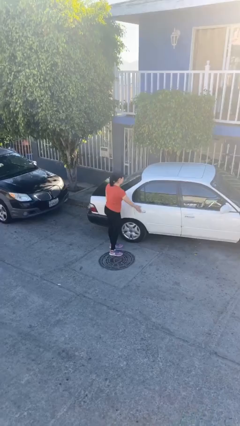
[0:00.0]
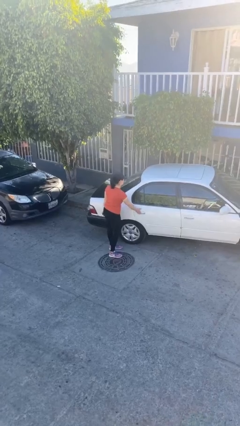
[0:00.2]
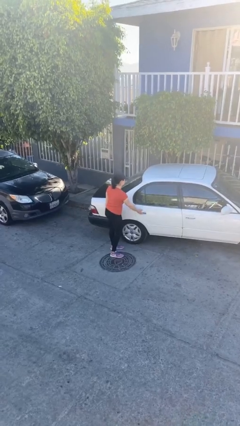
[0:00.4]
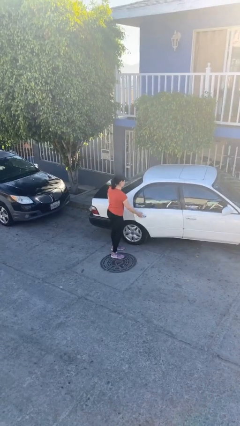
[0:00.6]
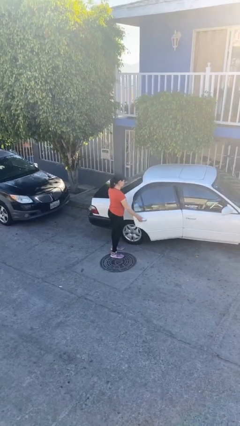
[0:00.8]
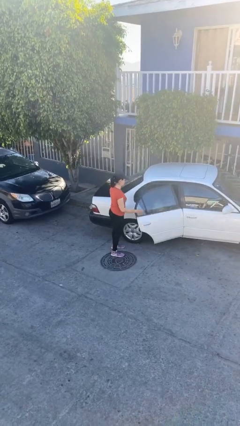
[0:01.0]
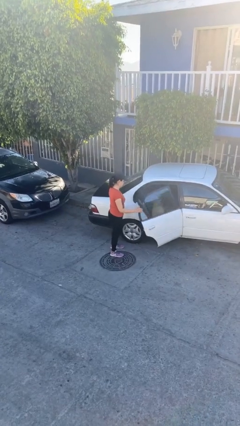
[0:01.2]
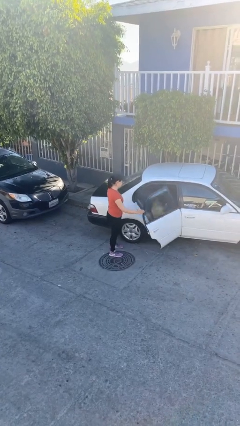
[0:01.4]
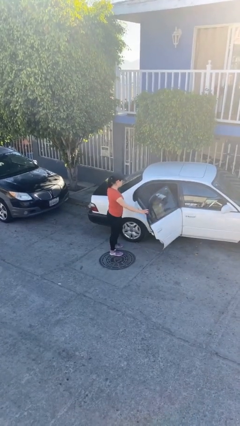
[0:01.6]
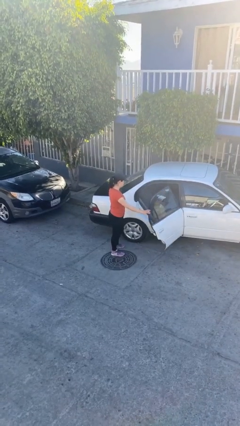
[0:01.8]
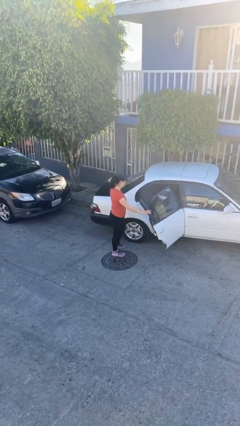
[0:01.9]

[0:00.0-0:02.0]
person opens car door

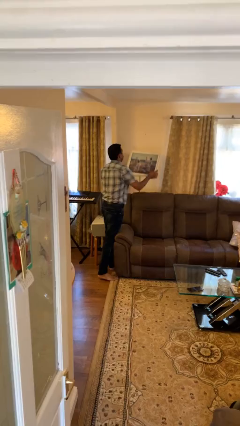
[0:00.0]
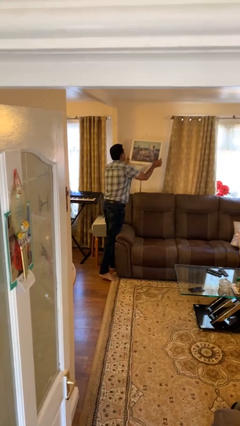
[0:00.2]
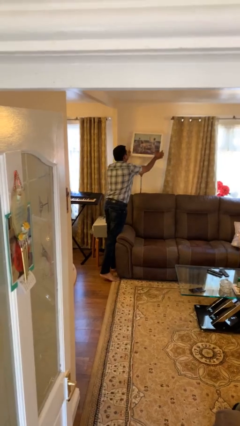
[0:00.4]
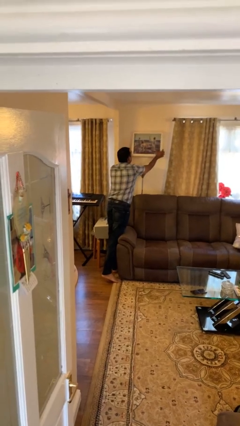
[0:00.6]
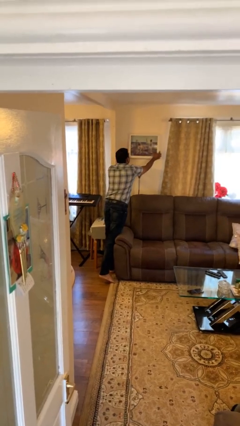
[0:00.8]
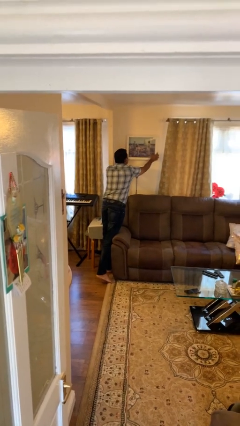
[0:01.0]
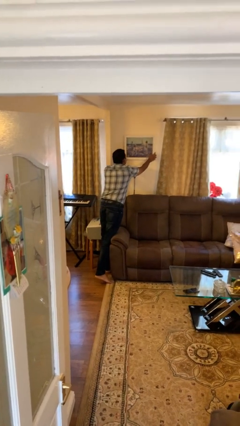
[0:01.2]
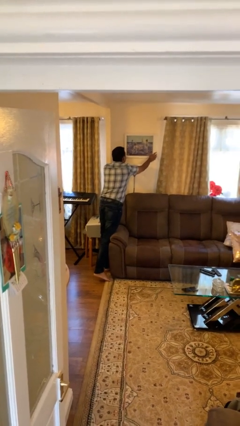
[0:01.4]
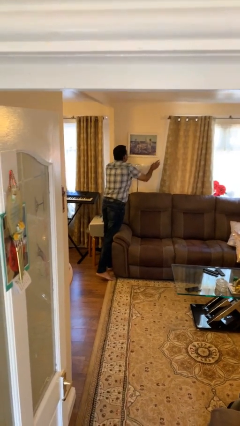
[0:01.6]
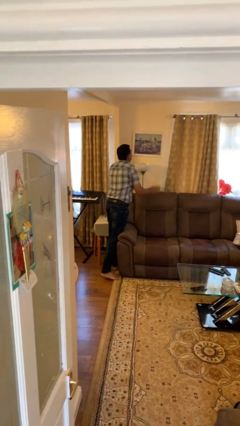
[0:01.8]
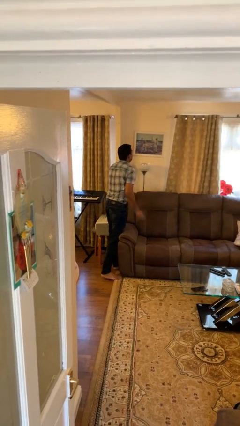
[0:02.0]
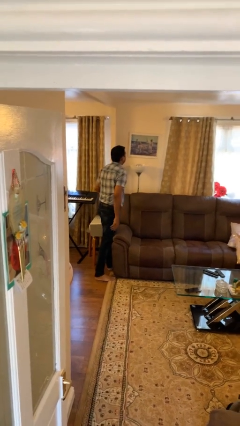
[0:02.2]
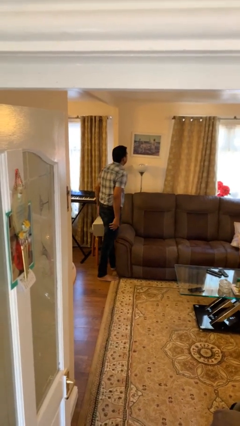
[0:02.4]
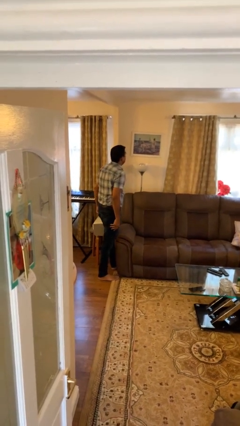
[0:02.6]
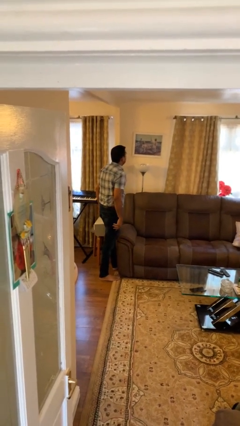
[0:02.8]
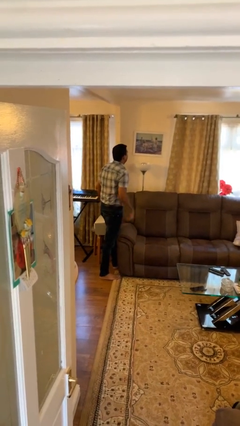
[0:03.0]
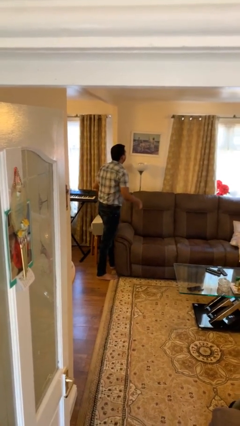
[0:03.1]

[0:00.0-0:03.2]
person puts up picture frame

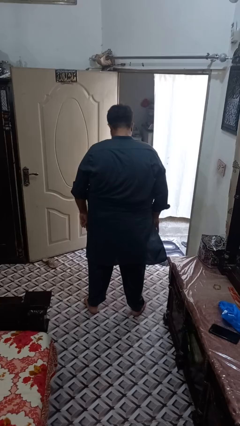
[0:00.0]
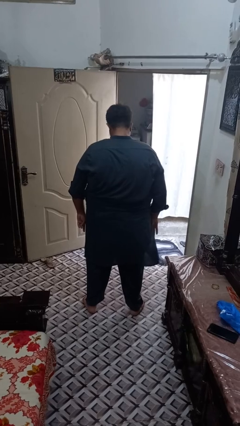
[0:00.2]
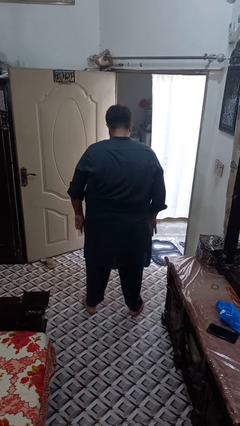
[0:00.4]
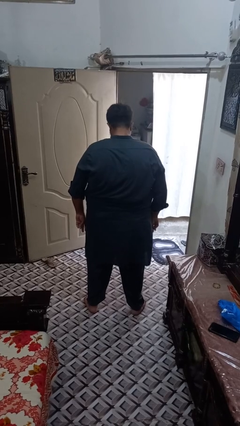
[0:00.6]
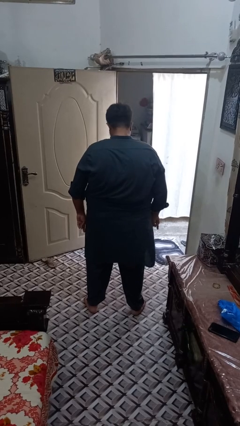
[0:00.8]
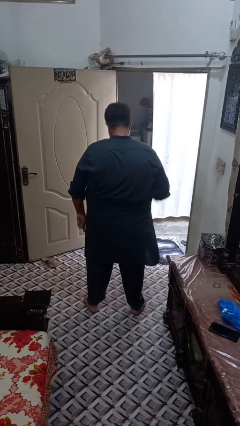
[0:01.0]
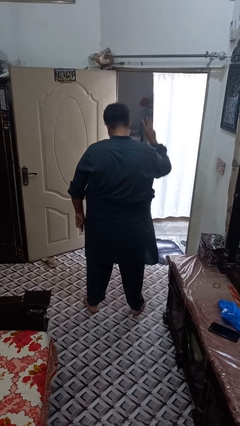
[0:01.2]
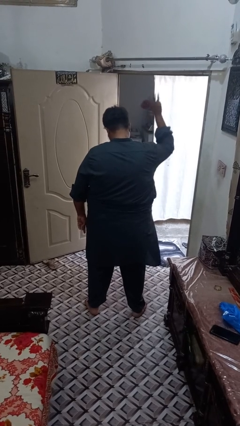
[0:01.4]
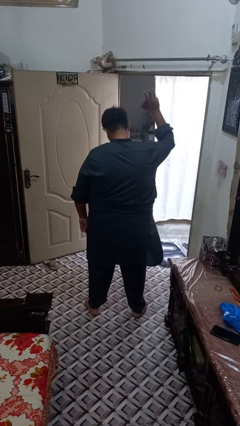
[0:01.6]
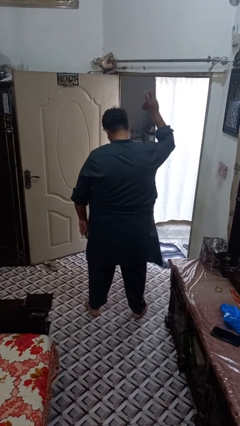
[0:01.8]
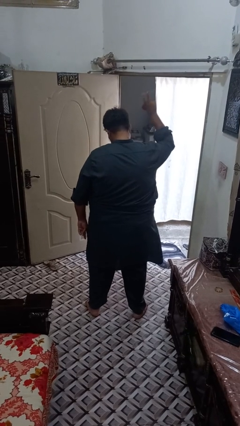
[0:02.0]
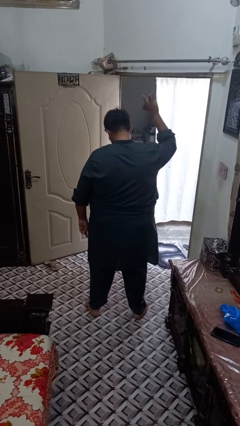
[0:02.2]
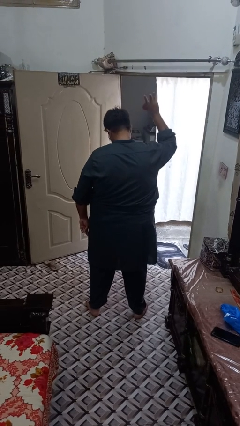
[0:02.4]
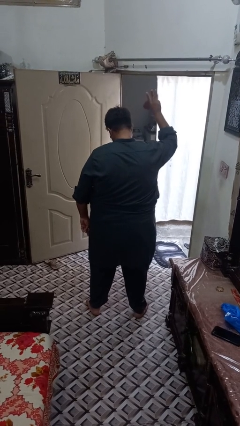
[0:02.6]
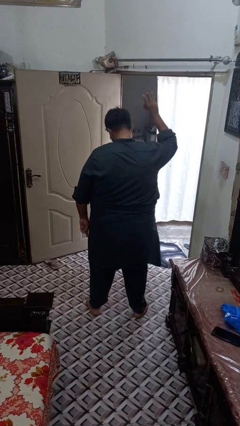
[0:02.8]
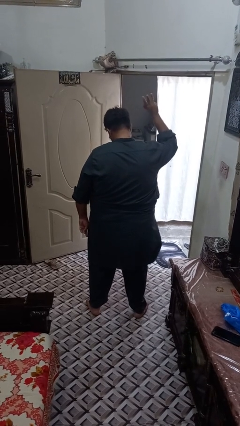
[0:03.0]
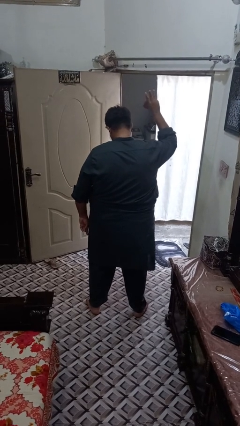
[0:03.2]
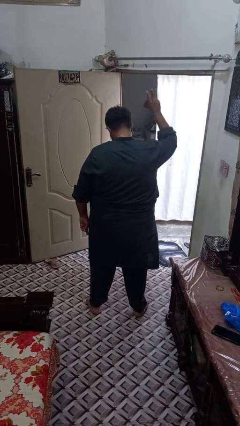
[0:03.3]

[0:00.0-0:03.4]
person gestures number three

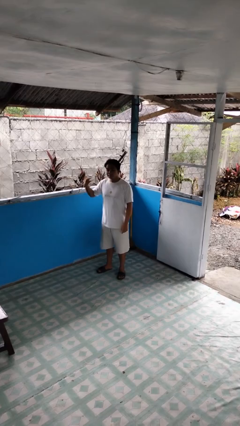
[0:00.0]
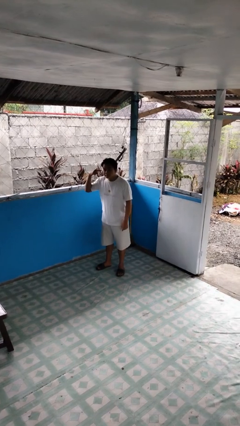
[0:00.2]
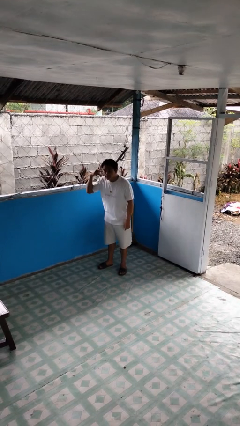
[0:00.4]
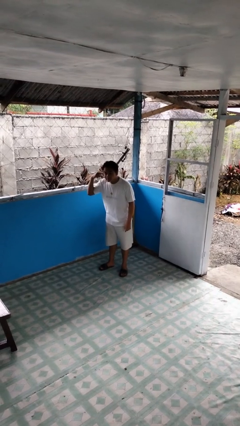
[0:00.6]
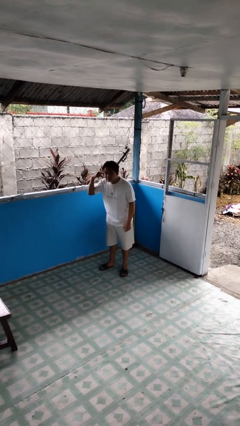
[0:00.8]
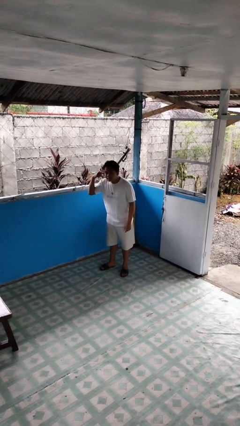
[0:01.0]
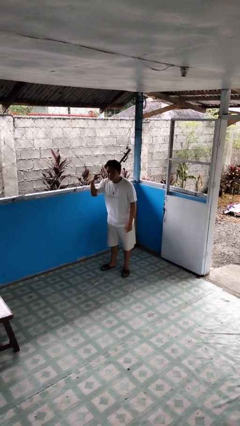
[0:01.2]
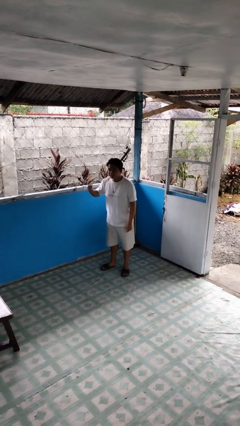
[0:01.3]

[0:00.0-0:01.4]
person gestures listen closely

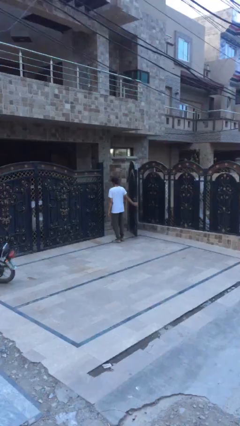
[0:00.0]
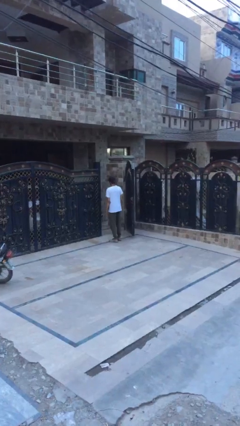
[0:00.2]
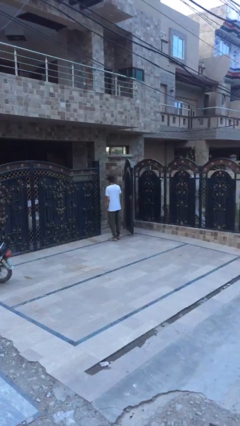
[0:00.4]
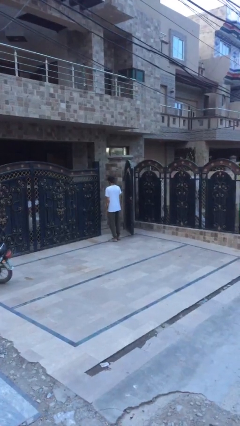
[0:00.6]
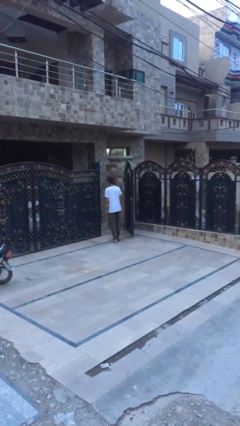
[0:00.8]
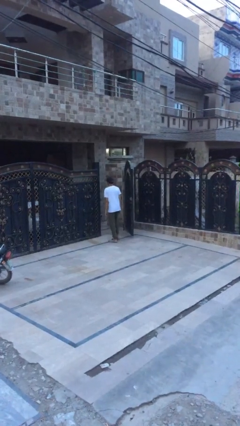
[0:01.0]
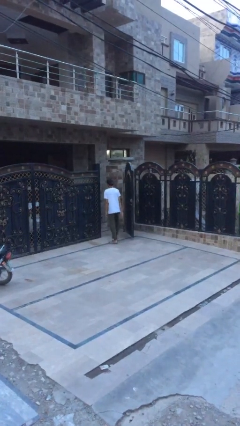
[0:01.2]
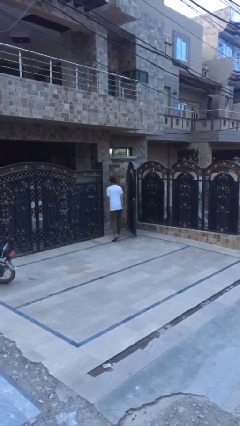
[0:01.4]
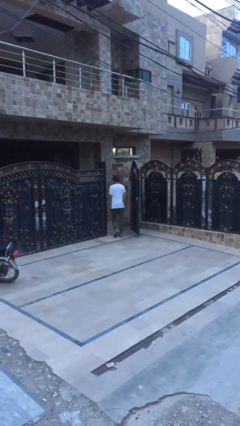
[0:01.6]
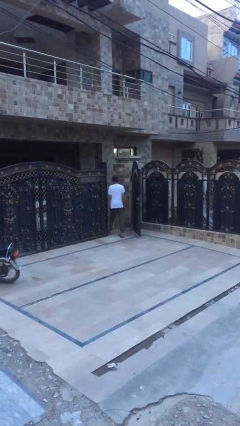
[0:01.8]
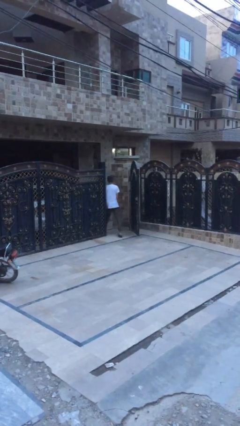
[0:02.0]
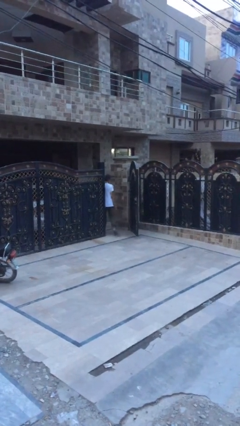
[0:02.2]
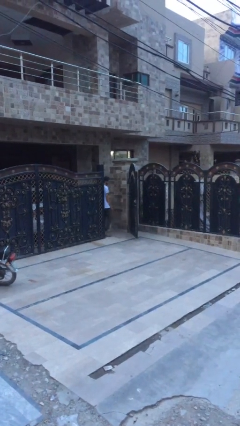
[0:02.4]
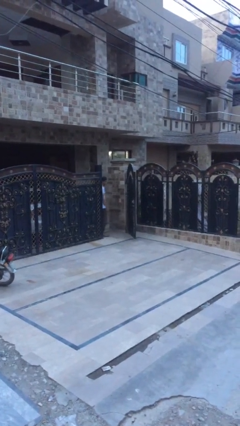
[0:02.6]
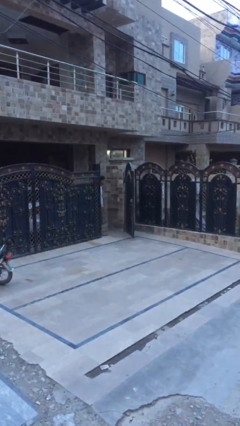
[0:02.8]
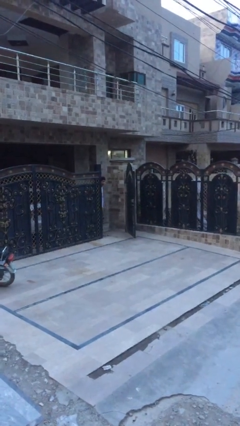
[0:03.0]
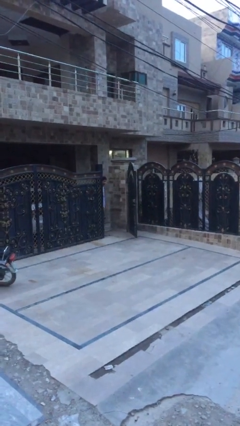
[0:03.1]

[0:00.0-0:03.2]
person exits scene through structure

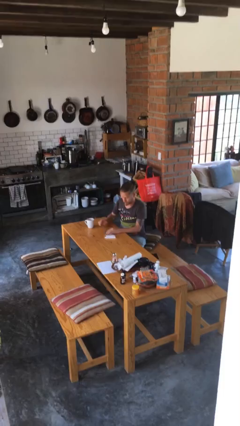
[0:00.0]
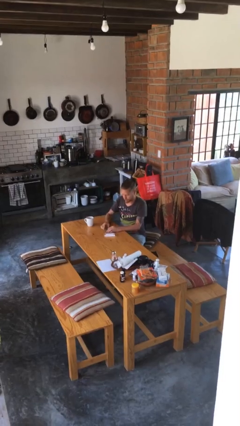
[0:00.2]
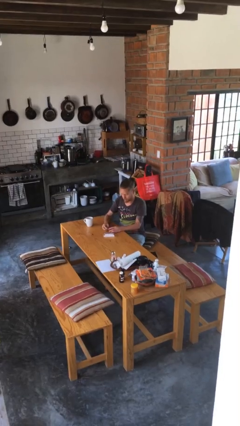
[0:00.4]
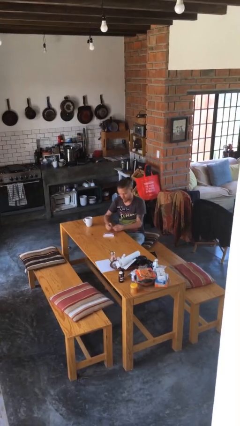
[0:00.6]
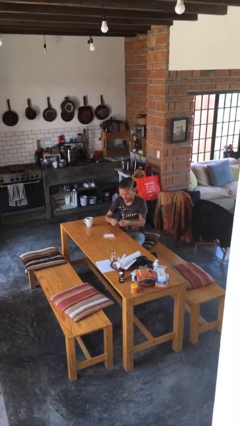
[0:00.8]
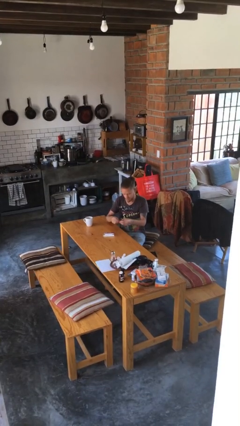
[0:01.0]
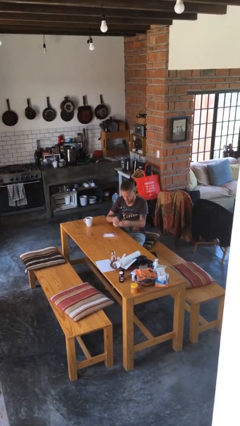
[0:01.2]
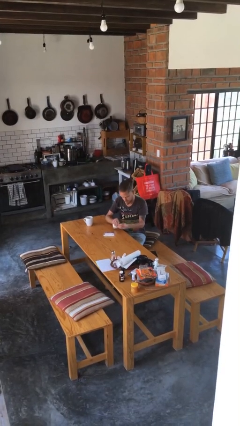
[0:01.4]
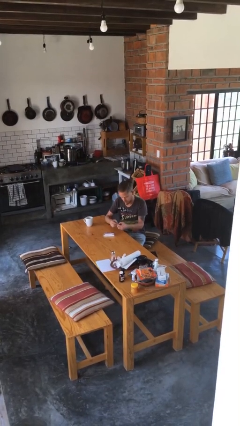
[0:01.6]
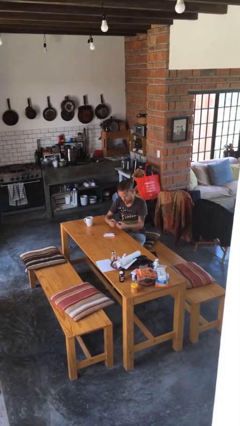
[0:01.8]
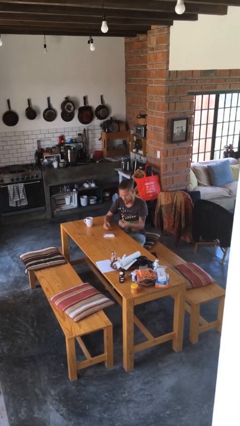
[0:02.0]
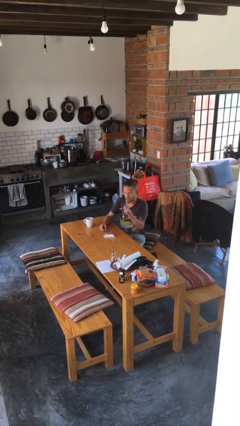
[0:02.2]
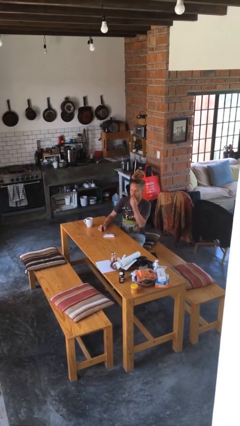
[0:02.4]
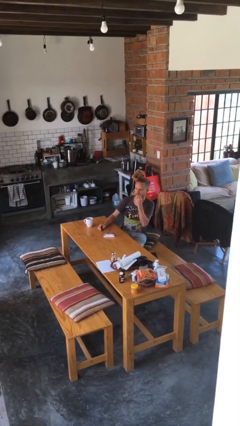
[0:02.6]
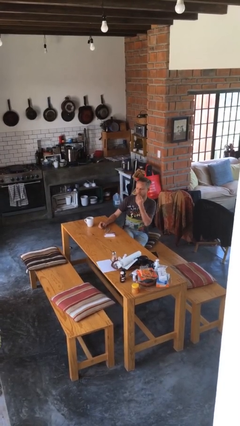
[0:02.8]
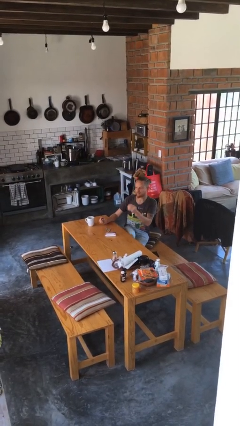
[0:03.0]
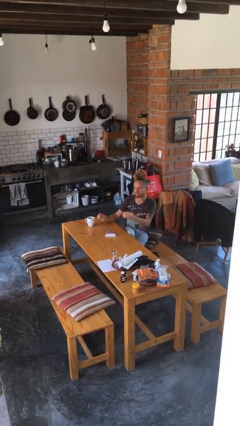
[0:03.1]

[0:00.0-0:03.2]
person takes medicine pills

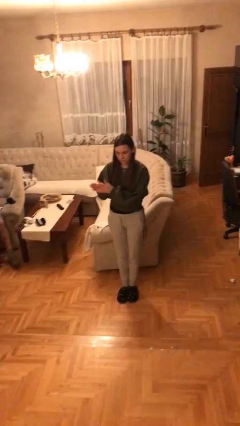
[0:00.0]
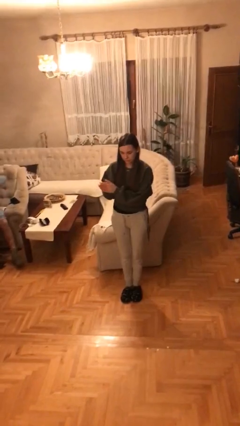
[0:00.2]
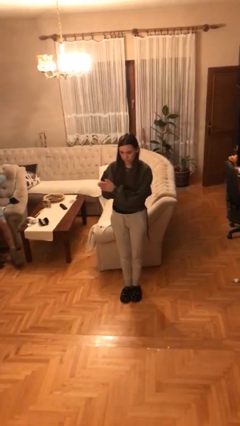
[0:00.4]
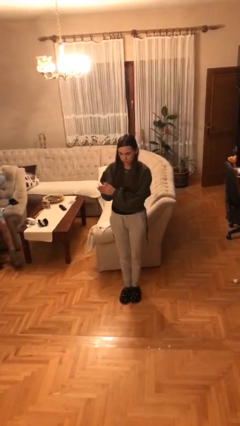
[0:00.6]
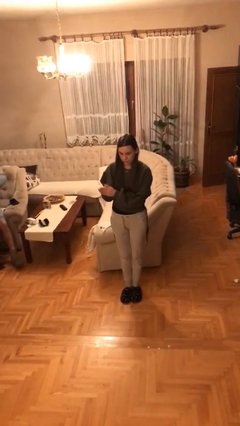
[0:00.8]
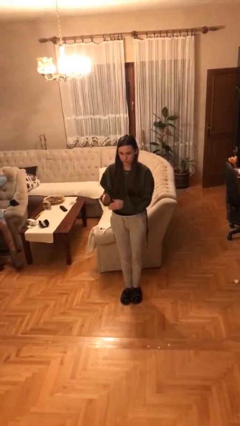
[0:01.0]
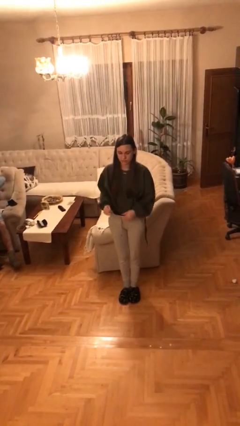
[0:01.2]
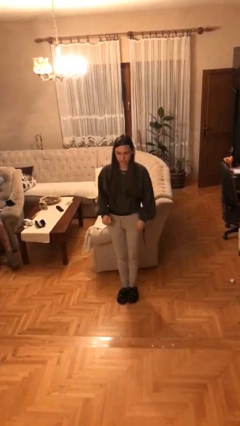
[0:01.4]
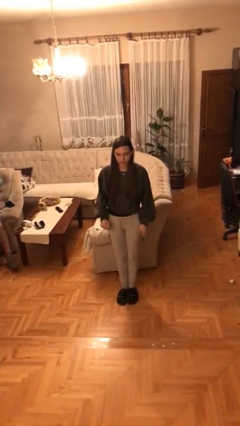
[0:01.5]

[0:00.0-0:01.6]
person claps hands
